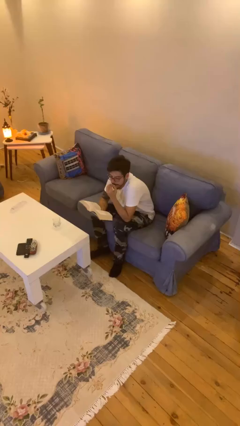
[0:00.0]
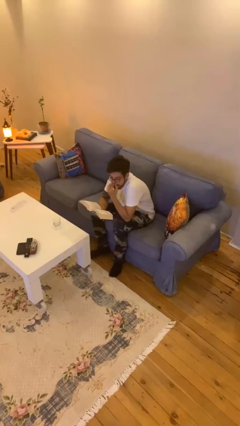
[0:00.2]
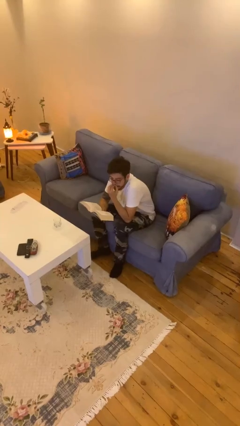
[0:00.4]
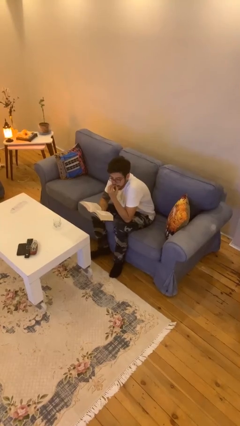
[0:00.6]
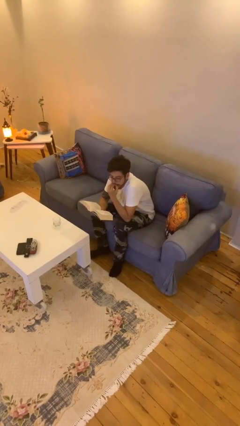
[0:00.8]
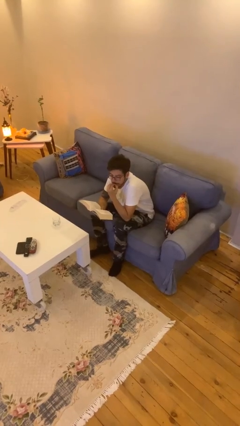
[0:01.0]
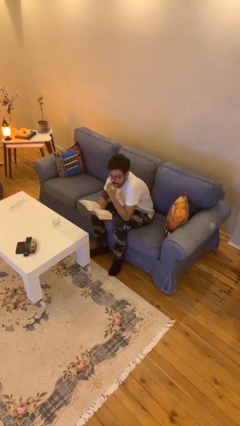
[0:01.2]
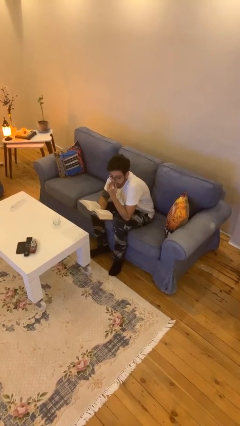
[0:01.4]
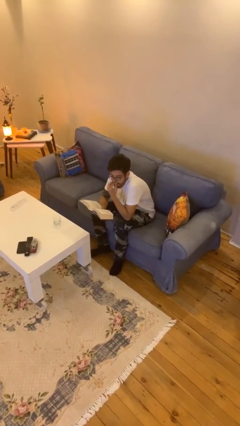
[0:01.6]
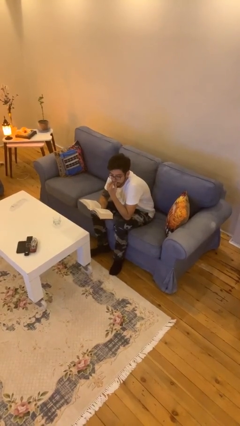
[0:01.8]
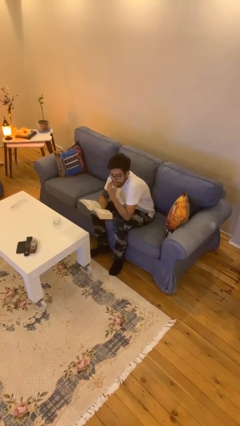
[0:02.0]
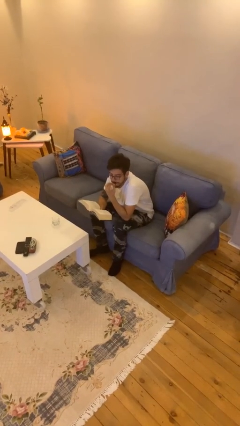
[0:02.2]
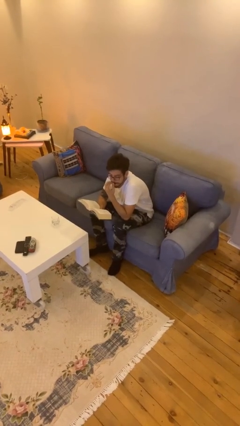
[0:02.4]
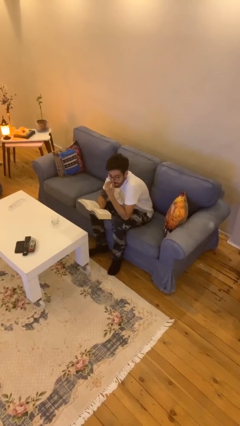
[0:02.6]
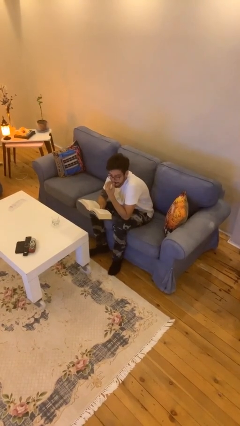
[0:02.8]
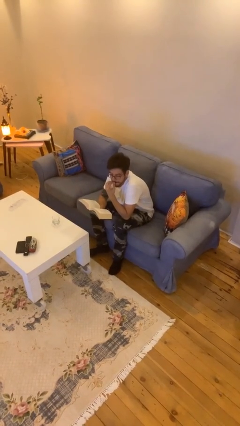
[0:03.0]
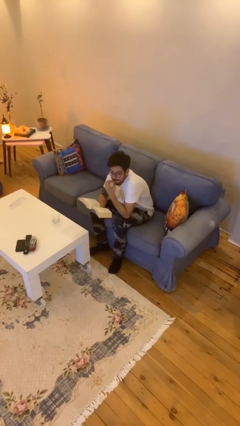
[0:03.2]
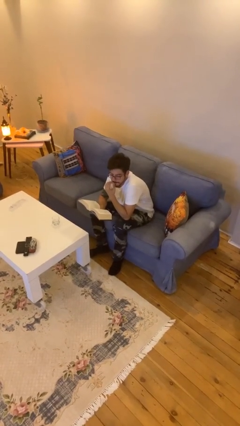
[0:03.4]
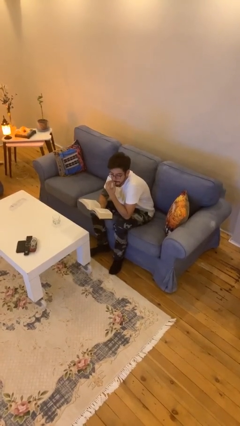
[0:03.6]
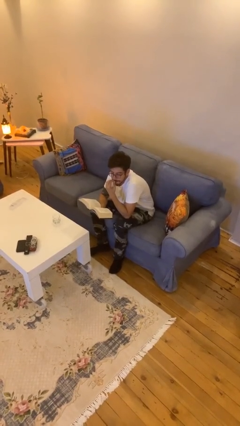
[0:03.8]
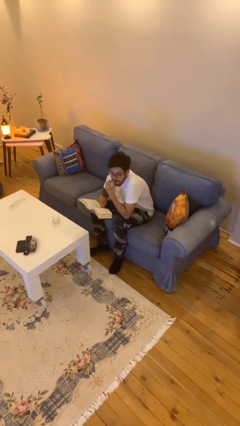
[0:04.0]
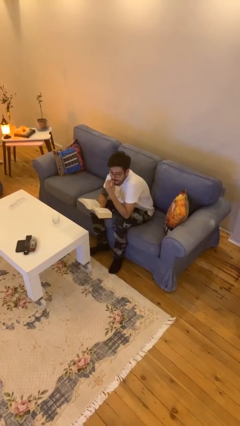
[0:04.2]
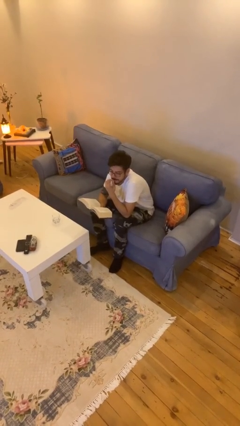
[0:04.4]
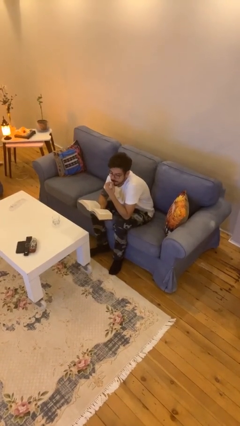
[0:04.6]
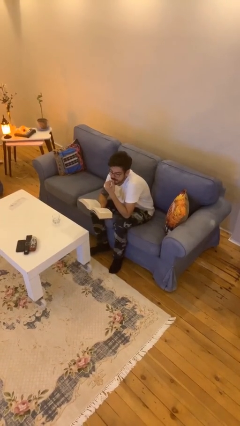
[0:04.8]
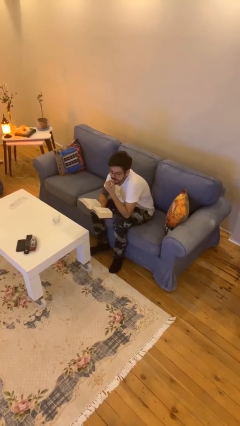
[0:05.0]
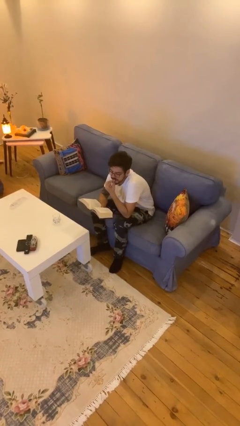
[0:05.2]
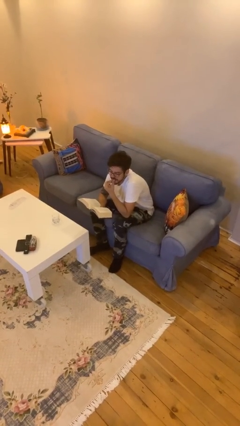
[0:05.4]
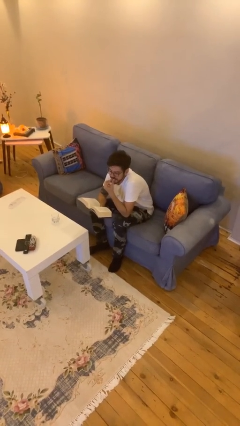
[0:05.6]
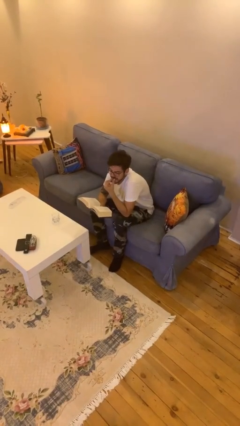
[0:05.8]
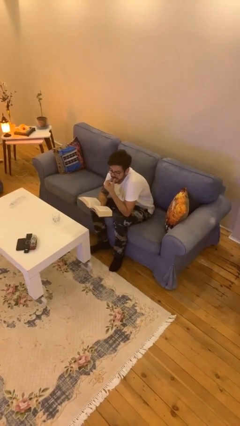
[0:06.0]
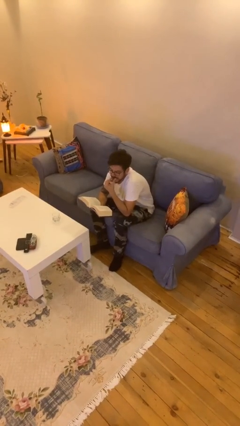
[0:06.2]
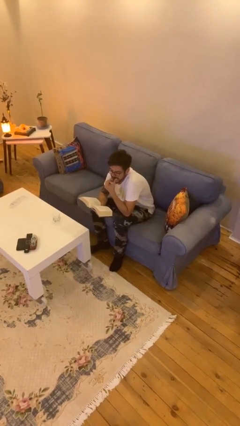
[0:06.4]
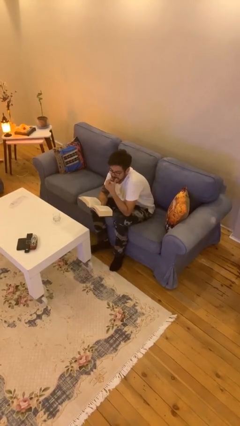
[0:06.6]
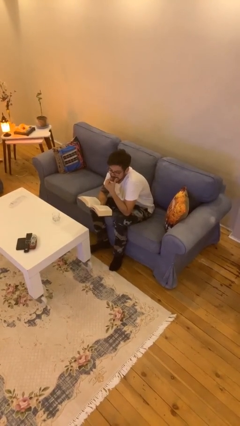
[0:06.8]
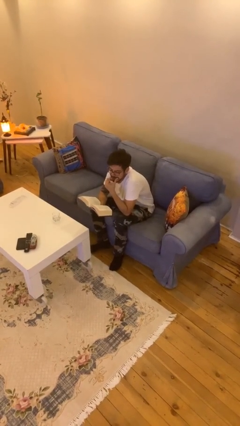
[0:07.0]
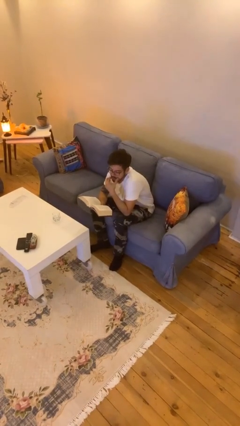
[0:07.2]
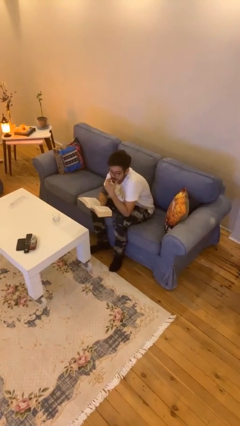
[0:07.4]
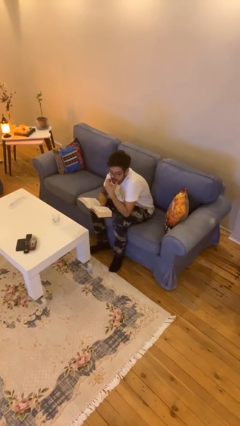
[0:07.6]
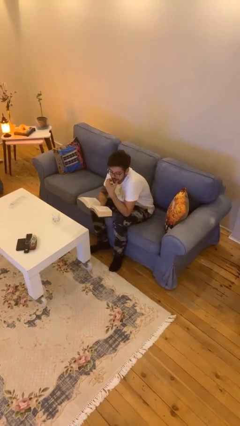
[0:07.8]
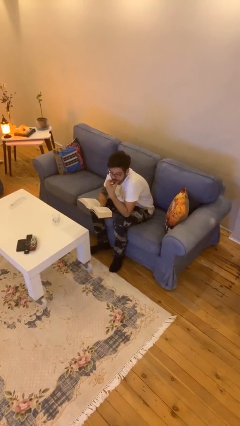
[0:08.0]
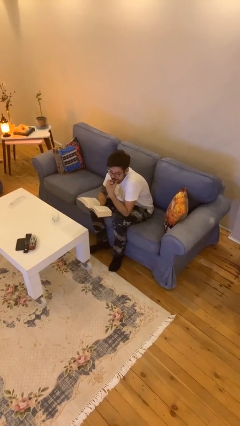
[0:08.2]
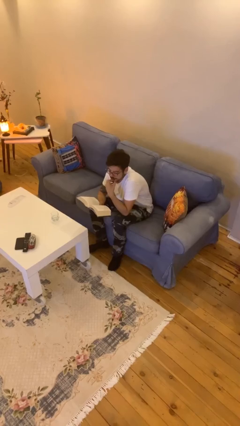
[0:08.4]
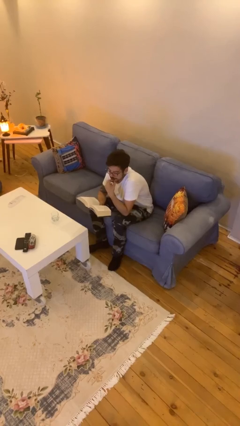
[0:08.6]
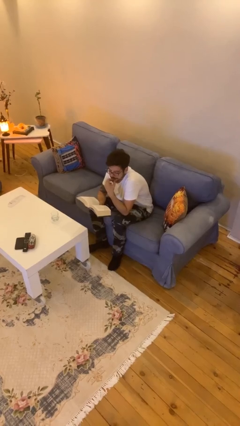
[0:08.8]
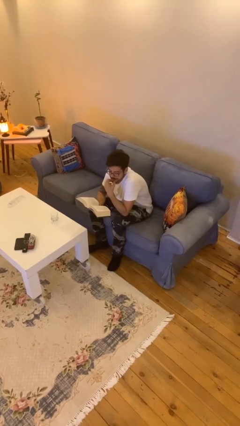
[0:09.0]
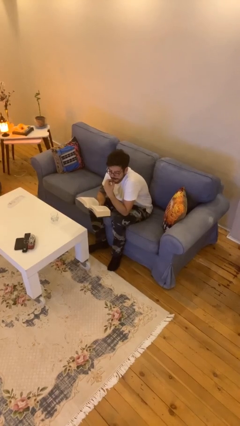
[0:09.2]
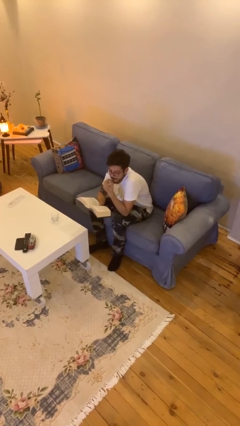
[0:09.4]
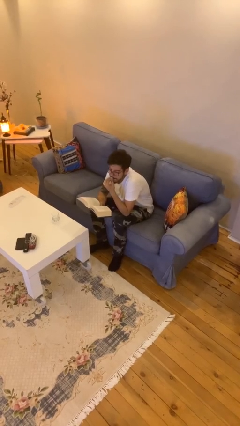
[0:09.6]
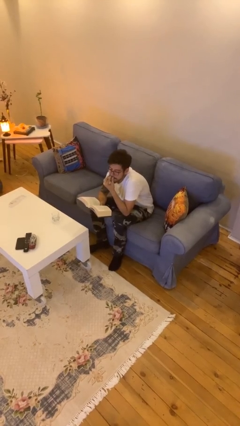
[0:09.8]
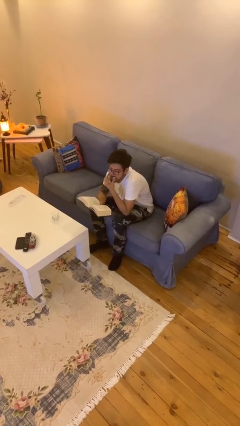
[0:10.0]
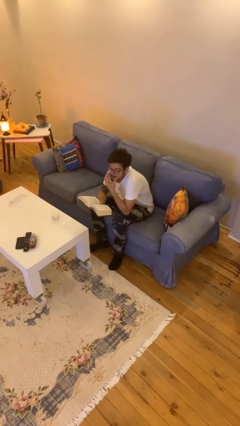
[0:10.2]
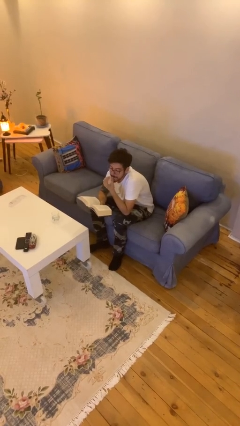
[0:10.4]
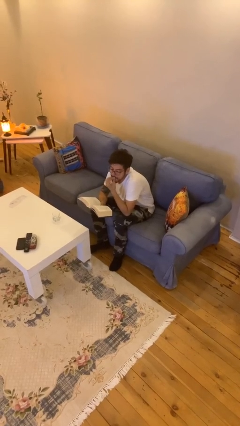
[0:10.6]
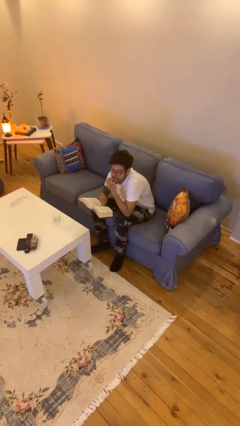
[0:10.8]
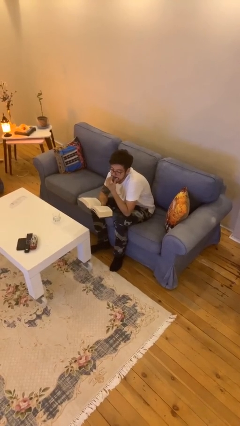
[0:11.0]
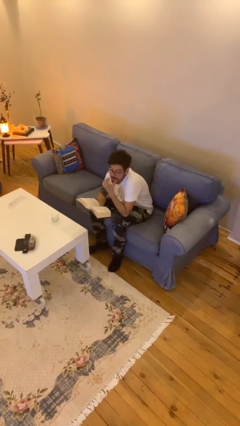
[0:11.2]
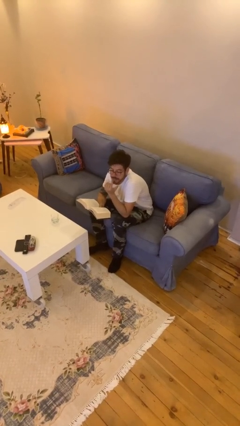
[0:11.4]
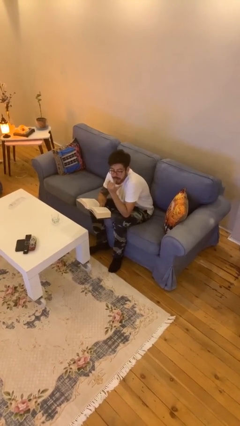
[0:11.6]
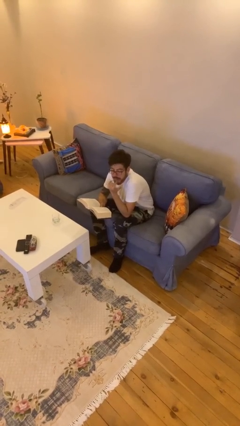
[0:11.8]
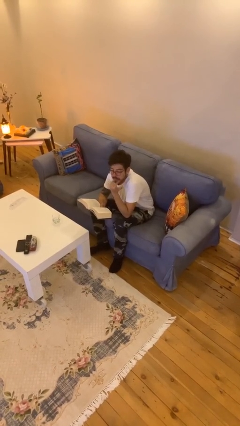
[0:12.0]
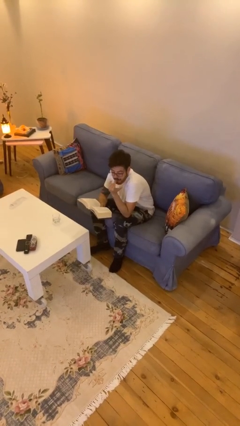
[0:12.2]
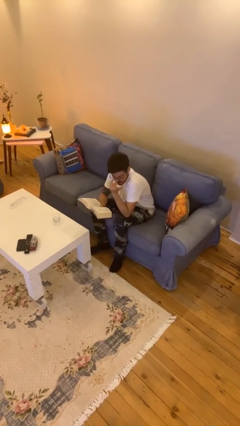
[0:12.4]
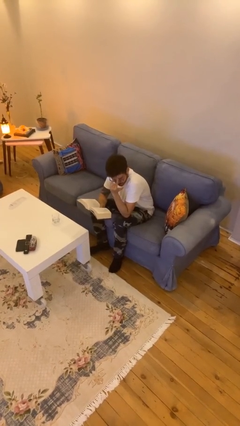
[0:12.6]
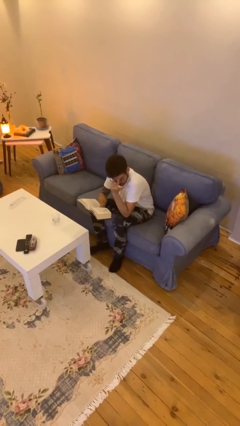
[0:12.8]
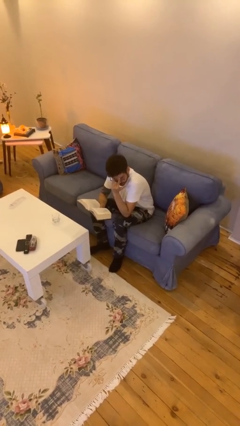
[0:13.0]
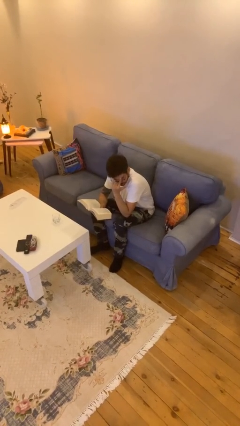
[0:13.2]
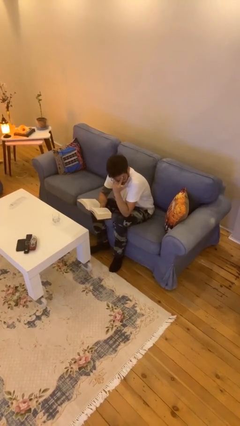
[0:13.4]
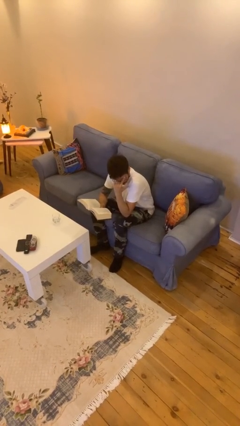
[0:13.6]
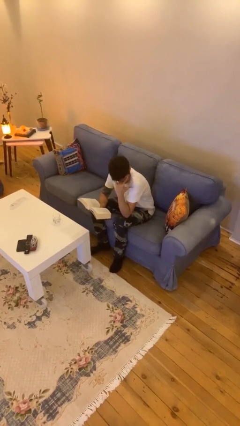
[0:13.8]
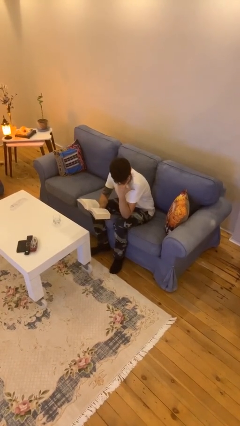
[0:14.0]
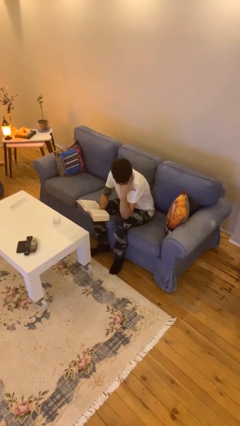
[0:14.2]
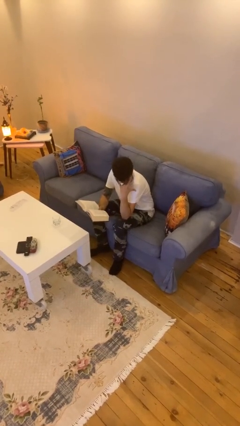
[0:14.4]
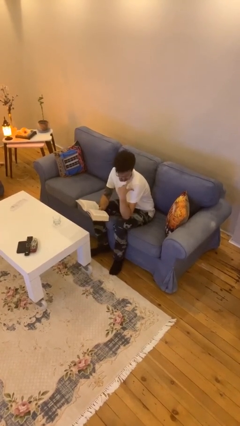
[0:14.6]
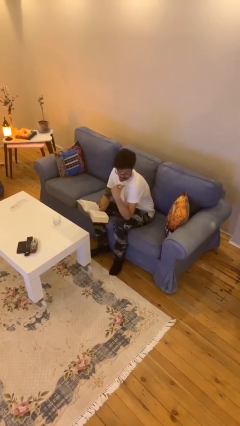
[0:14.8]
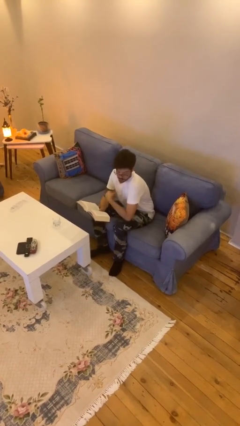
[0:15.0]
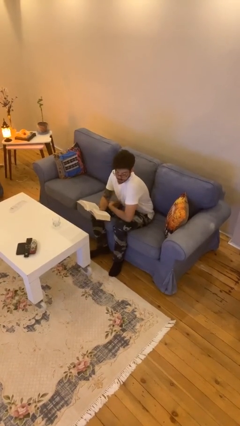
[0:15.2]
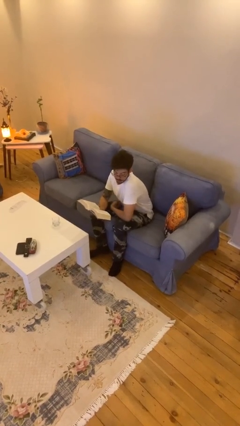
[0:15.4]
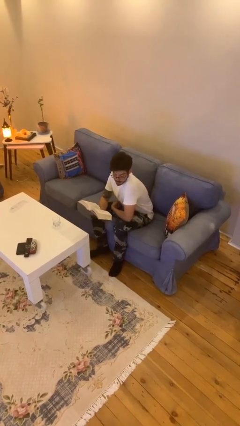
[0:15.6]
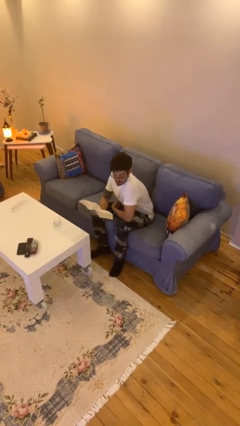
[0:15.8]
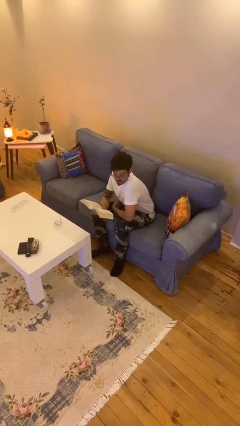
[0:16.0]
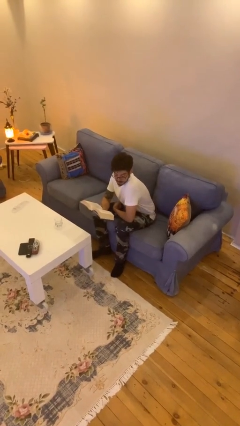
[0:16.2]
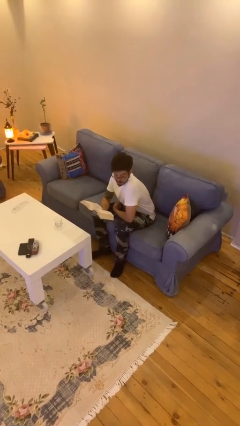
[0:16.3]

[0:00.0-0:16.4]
person reads document

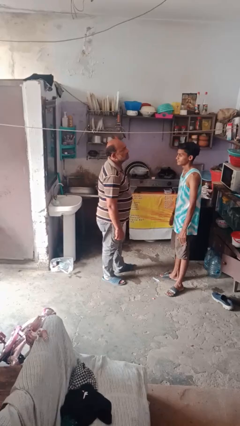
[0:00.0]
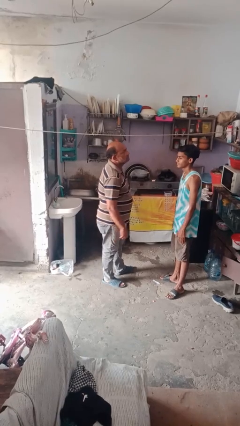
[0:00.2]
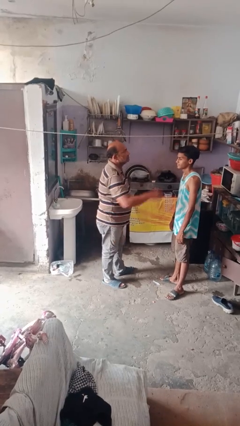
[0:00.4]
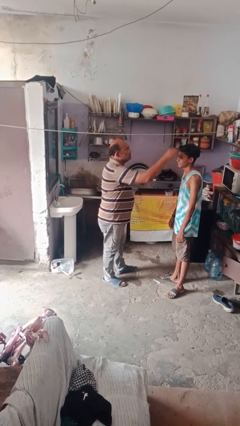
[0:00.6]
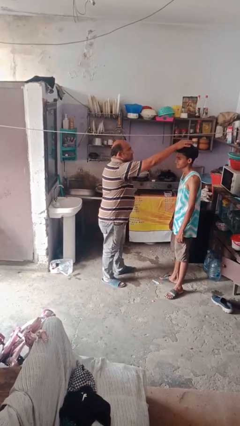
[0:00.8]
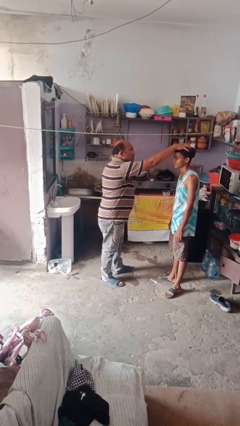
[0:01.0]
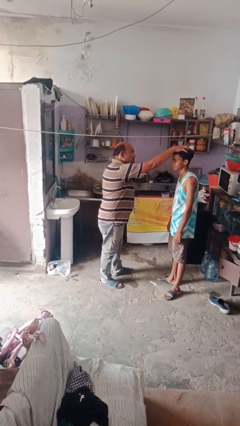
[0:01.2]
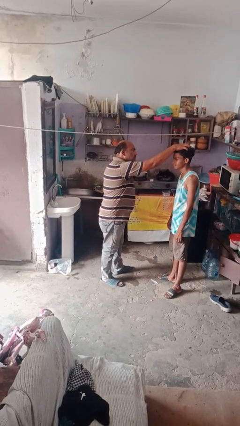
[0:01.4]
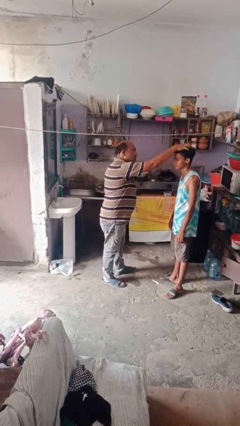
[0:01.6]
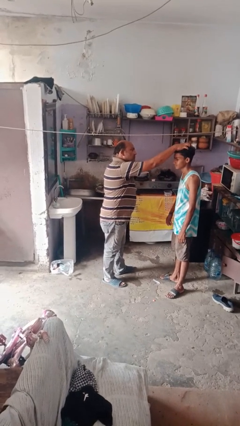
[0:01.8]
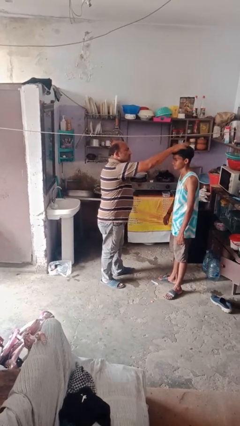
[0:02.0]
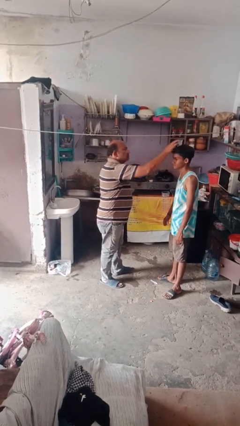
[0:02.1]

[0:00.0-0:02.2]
person grabs person by hair
